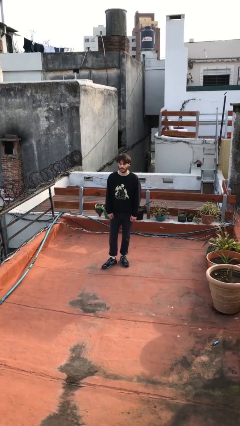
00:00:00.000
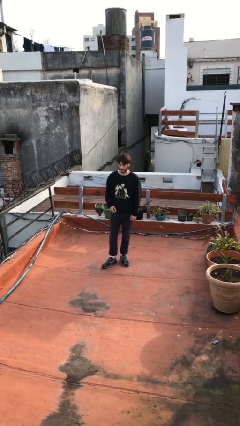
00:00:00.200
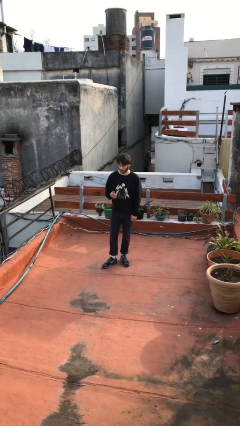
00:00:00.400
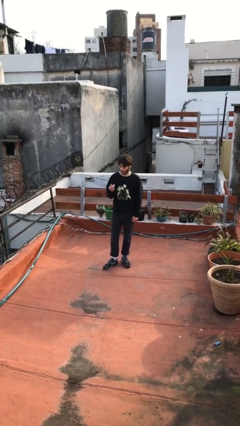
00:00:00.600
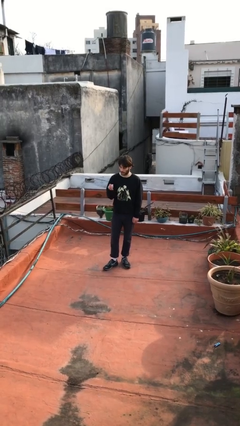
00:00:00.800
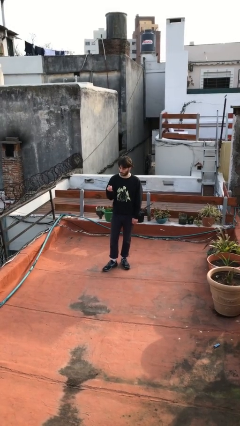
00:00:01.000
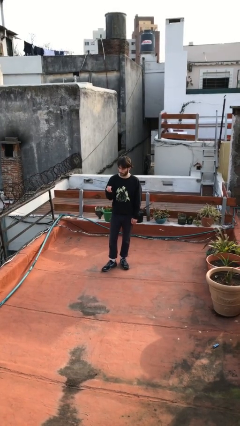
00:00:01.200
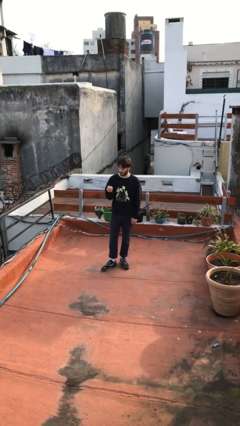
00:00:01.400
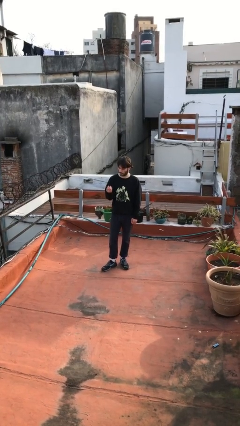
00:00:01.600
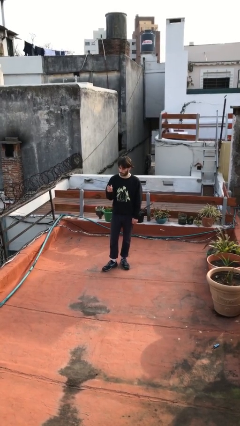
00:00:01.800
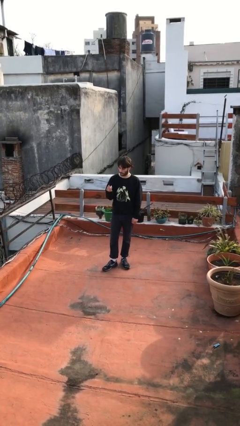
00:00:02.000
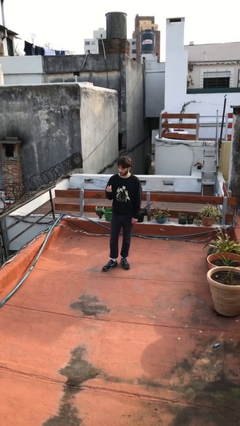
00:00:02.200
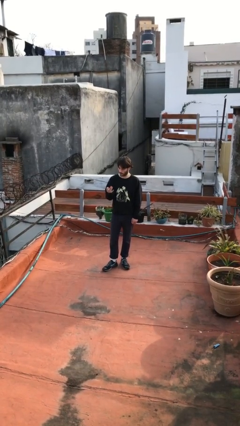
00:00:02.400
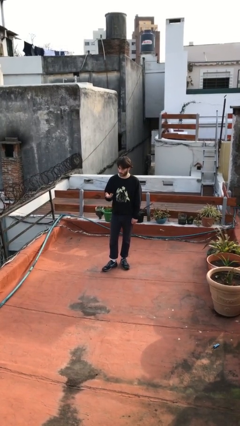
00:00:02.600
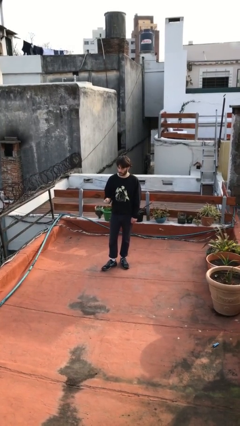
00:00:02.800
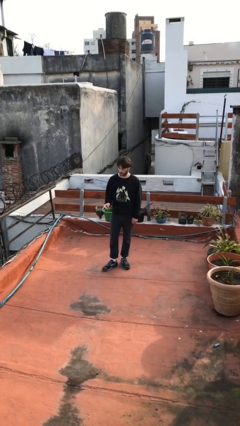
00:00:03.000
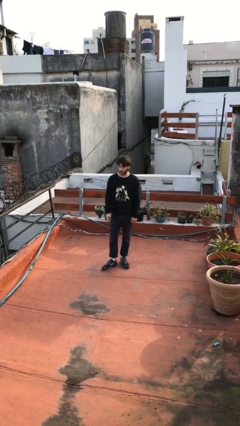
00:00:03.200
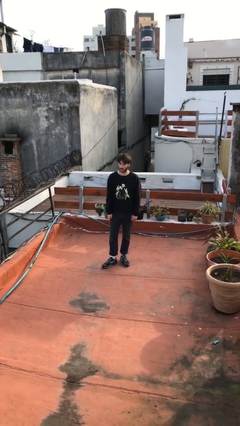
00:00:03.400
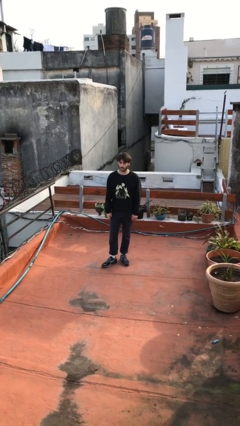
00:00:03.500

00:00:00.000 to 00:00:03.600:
person cracks knuckles

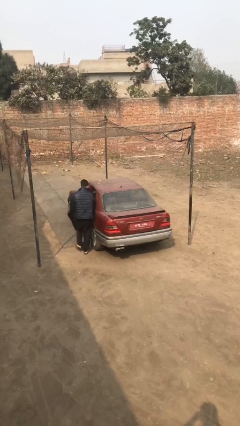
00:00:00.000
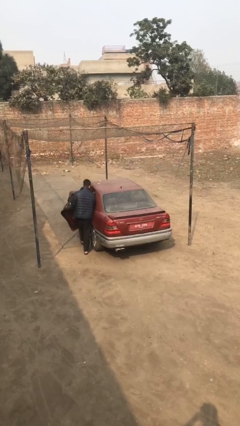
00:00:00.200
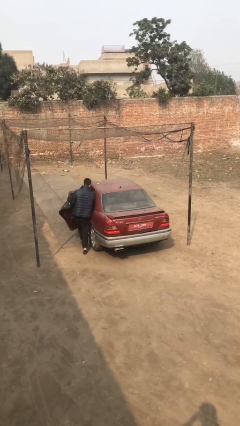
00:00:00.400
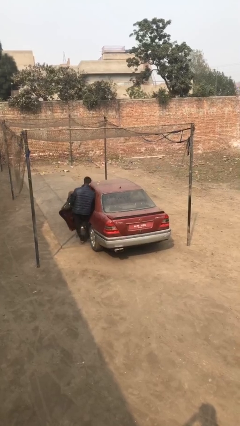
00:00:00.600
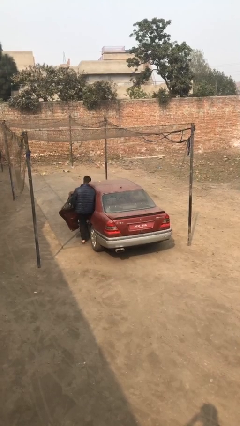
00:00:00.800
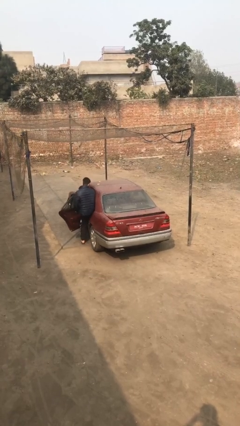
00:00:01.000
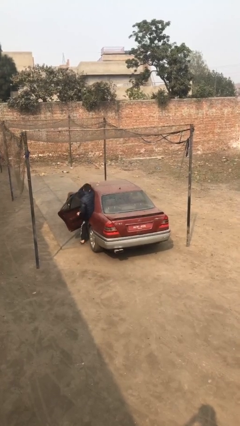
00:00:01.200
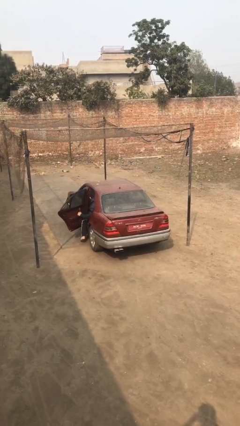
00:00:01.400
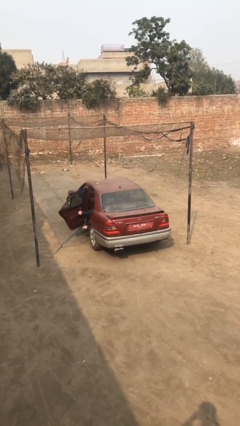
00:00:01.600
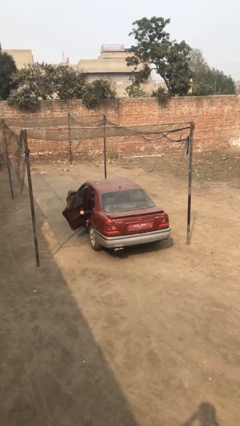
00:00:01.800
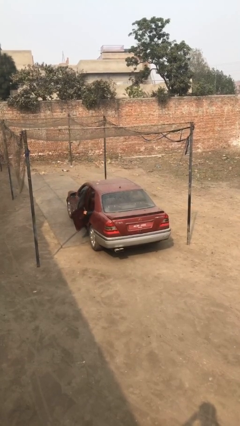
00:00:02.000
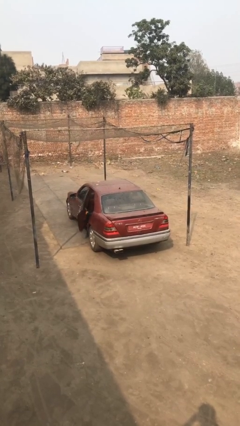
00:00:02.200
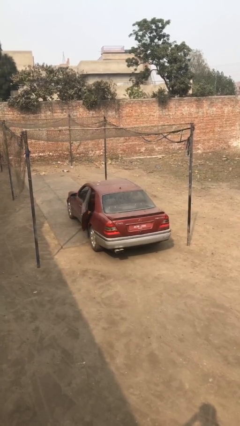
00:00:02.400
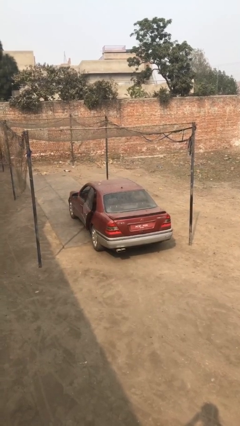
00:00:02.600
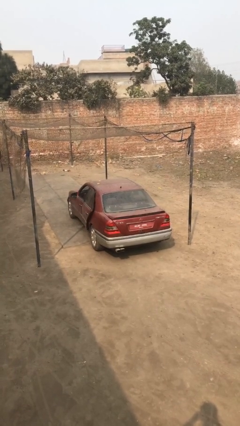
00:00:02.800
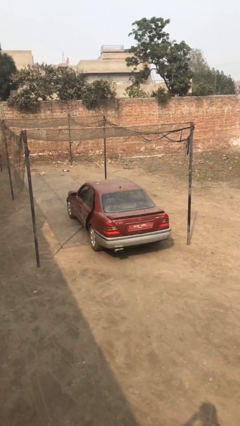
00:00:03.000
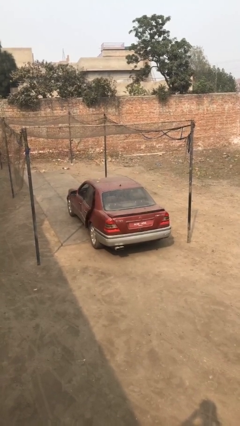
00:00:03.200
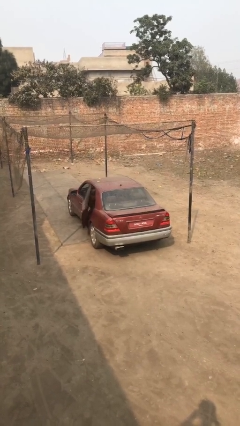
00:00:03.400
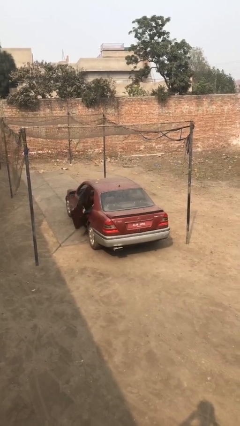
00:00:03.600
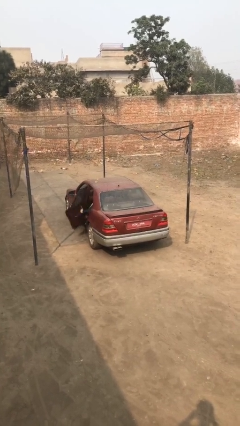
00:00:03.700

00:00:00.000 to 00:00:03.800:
car picks up person

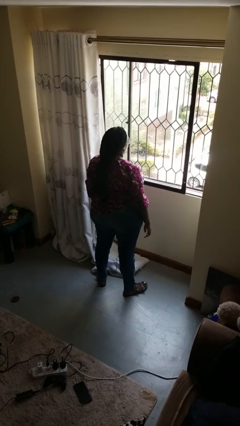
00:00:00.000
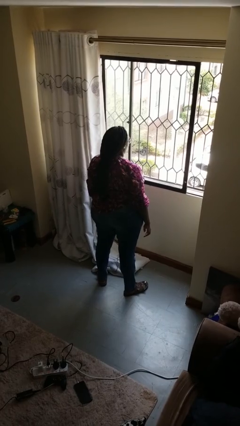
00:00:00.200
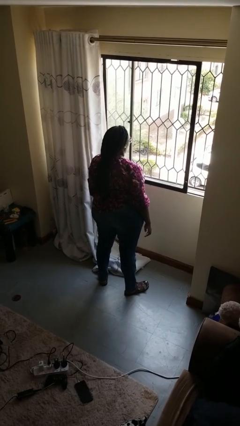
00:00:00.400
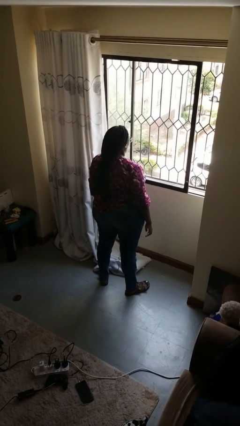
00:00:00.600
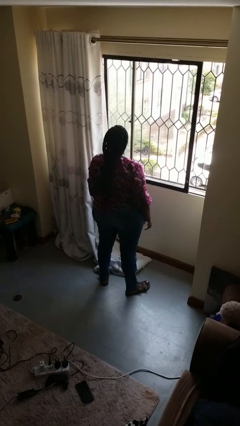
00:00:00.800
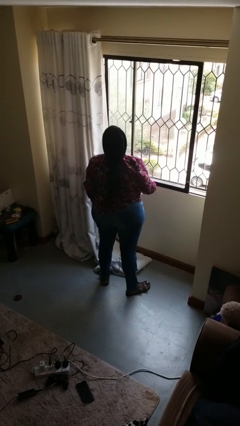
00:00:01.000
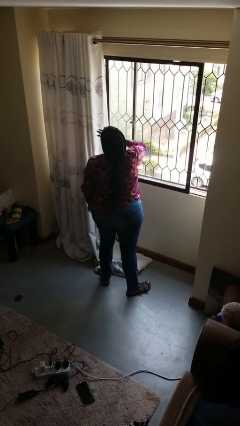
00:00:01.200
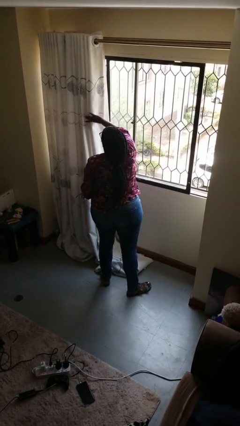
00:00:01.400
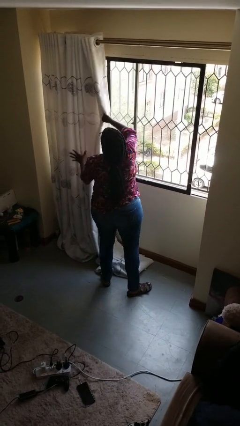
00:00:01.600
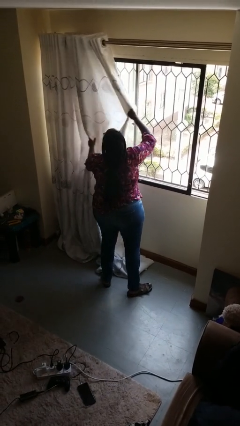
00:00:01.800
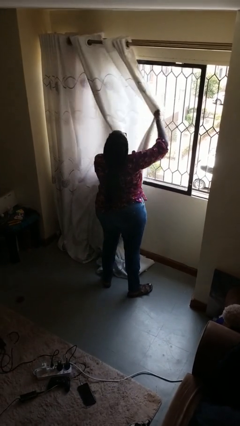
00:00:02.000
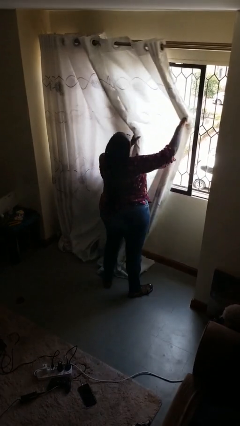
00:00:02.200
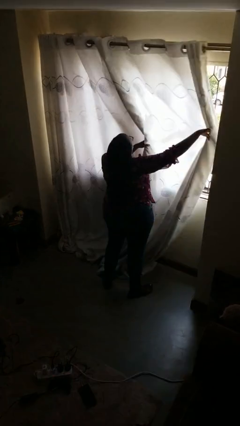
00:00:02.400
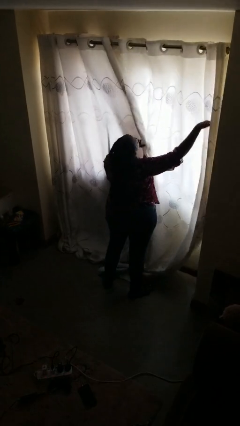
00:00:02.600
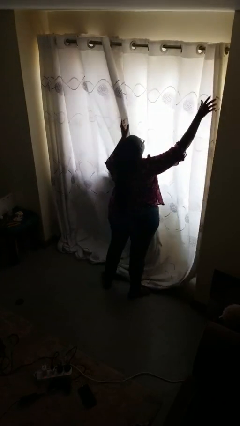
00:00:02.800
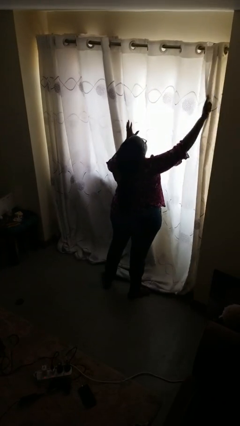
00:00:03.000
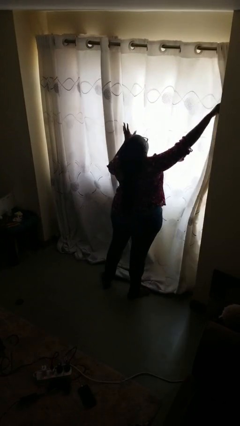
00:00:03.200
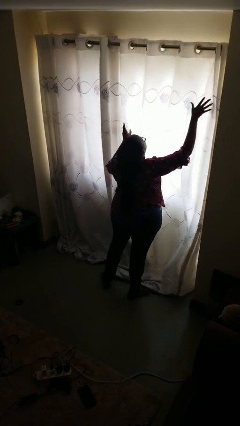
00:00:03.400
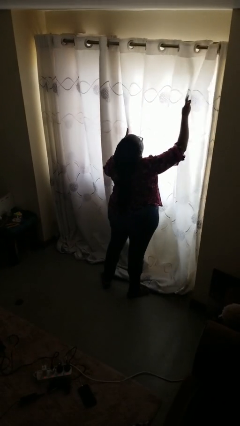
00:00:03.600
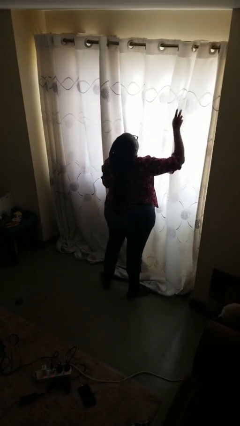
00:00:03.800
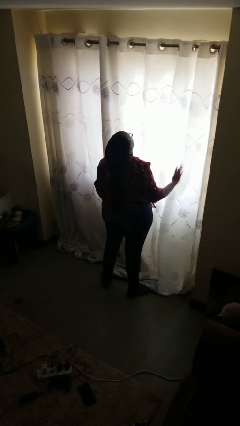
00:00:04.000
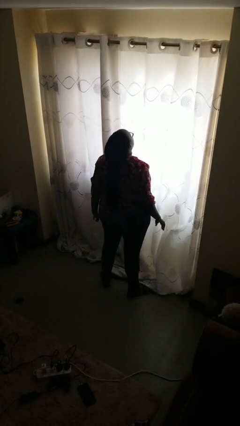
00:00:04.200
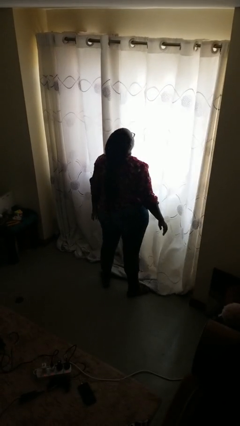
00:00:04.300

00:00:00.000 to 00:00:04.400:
person closes curtains

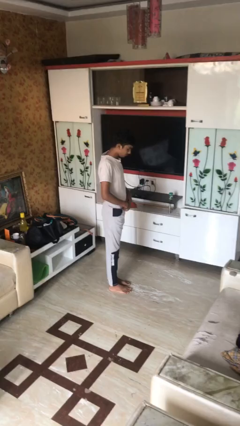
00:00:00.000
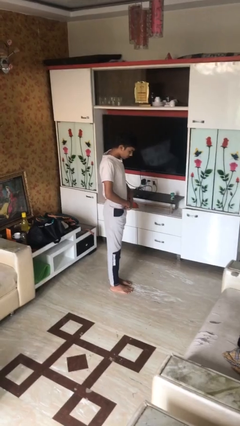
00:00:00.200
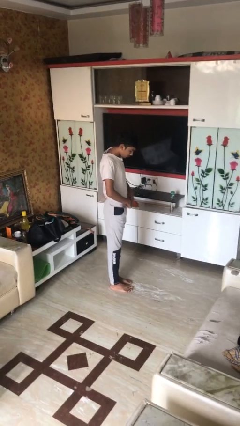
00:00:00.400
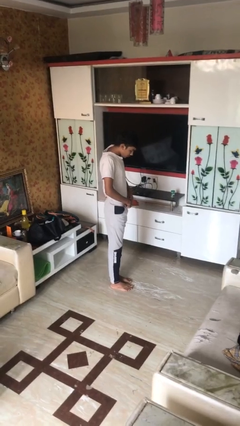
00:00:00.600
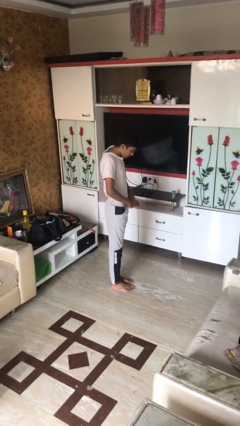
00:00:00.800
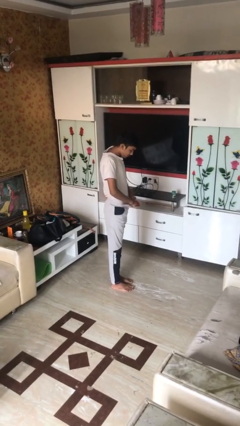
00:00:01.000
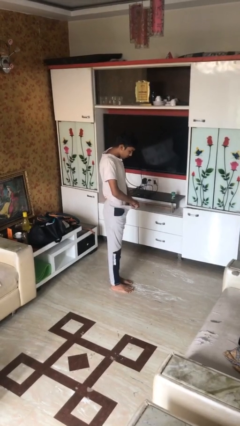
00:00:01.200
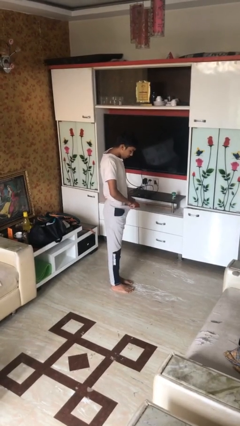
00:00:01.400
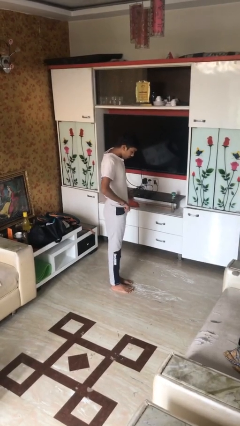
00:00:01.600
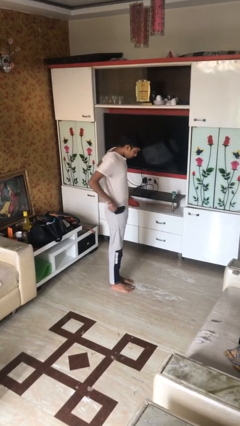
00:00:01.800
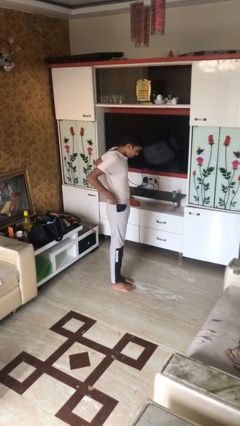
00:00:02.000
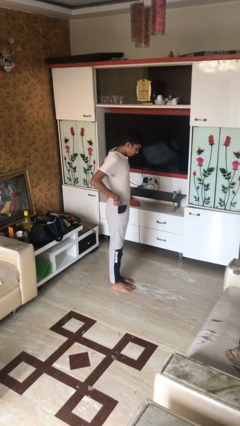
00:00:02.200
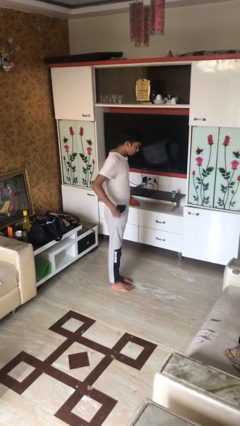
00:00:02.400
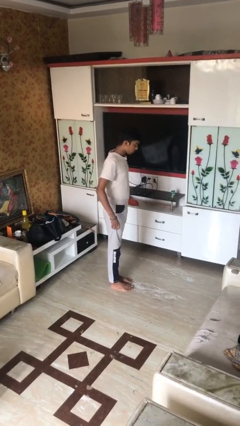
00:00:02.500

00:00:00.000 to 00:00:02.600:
person hikes up pants

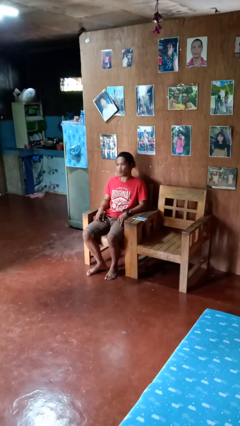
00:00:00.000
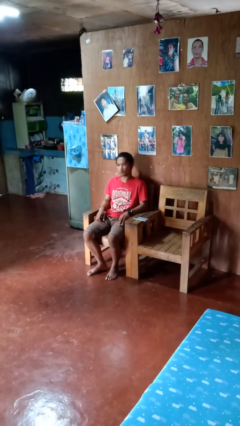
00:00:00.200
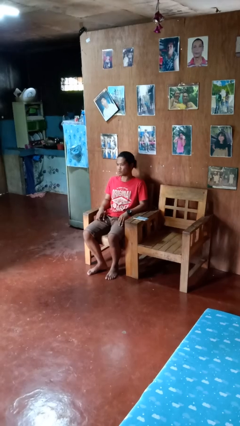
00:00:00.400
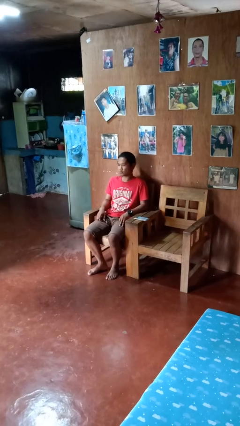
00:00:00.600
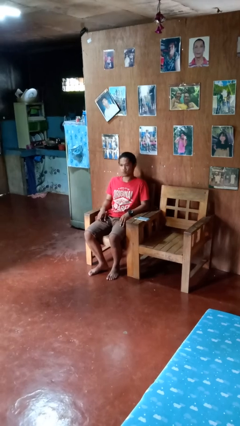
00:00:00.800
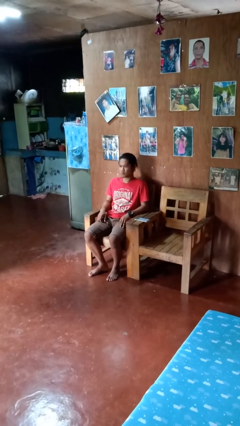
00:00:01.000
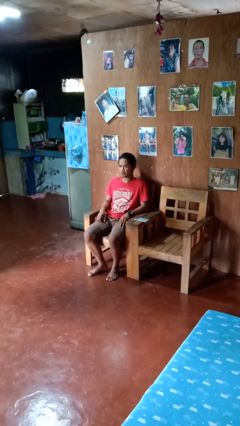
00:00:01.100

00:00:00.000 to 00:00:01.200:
person shakes head

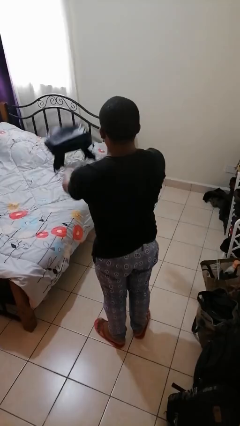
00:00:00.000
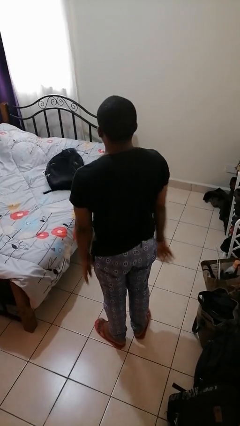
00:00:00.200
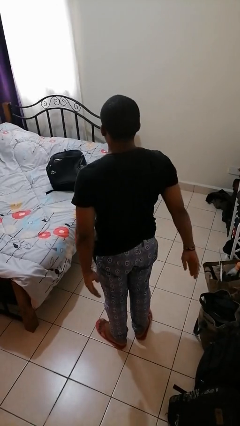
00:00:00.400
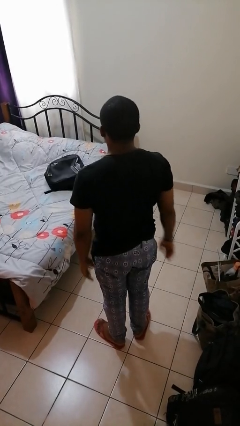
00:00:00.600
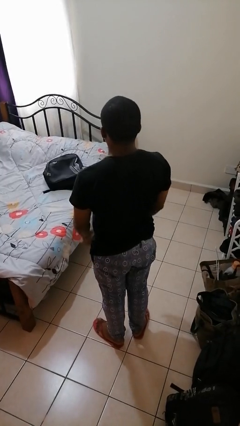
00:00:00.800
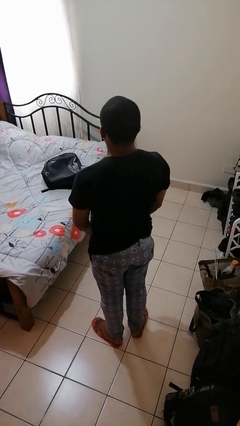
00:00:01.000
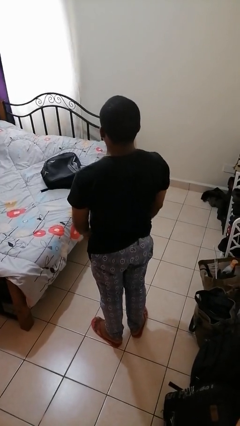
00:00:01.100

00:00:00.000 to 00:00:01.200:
person throws object on bed

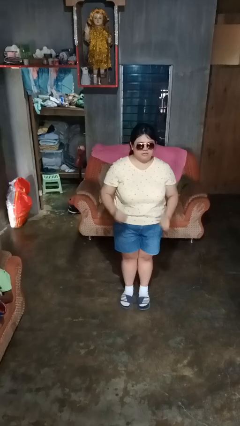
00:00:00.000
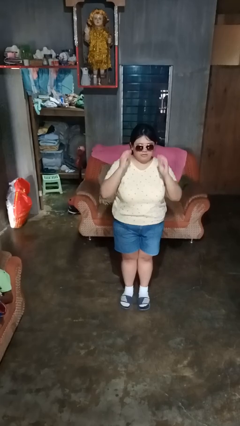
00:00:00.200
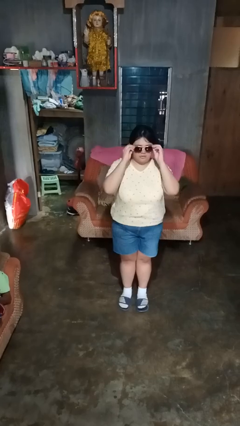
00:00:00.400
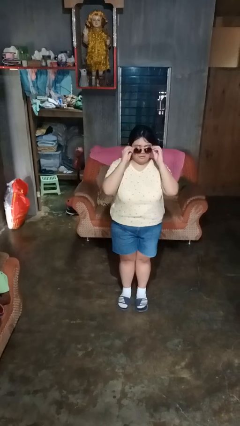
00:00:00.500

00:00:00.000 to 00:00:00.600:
person takes off sunglasses
